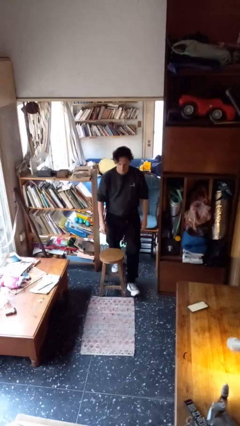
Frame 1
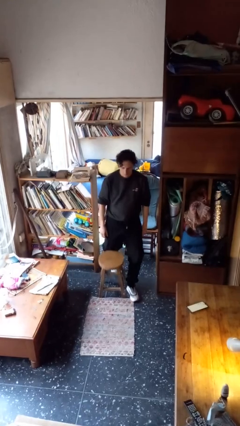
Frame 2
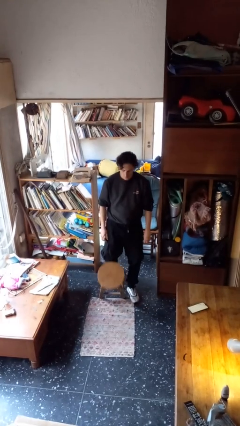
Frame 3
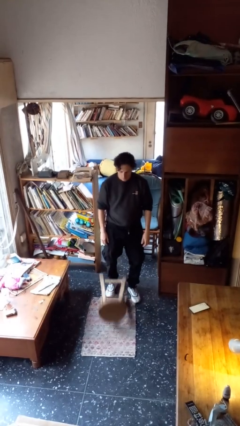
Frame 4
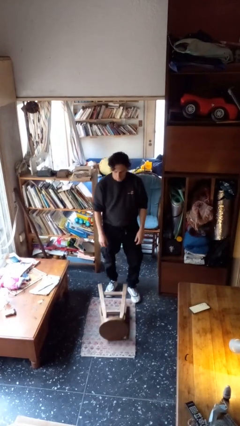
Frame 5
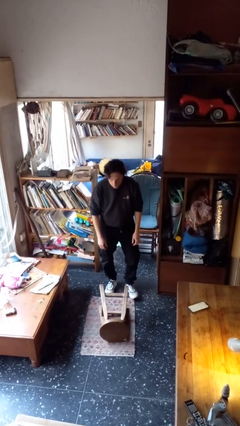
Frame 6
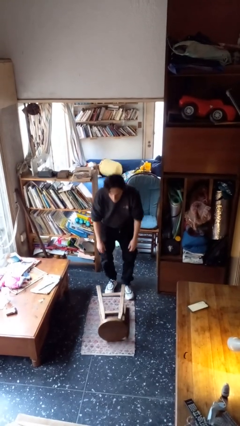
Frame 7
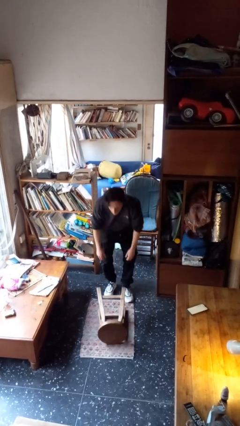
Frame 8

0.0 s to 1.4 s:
person knocks over furniture

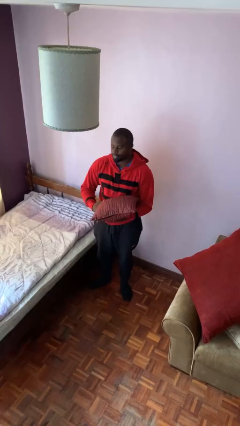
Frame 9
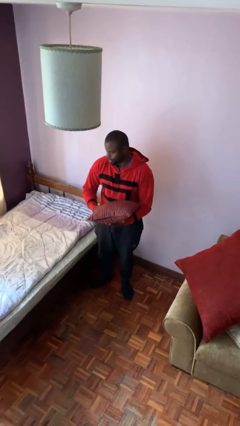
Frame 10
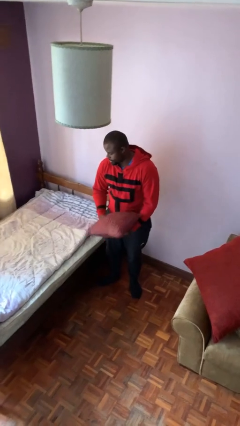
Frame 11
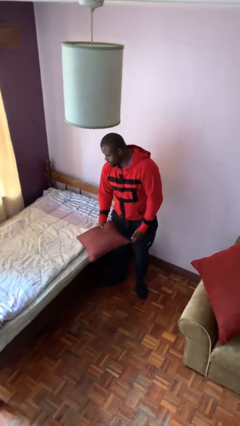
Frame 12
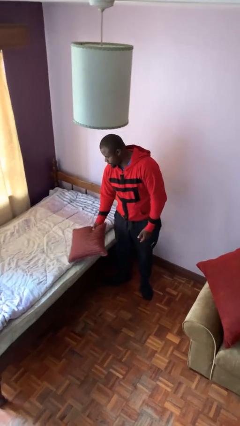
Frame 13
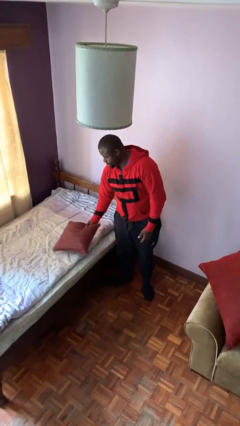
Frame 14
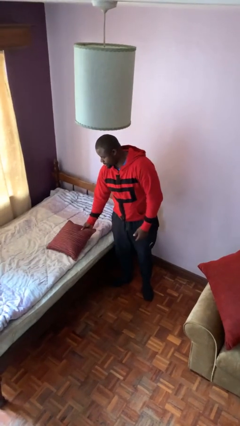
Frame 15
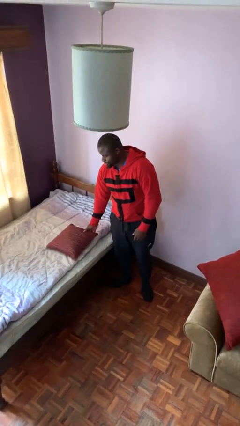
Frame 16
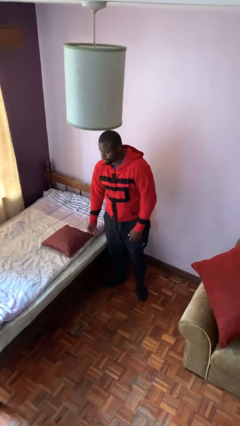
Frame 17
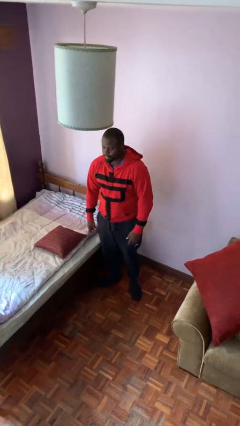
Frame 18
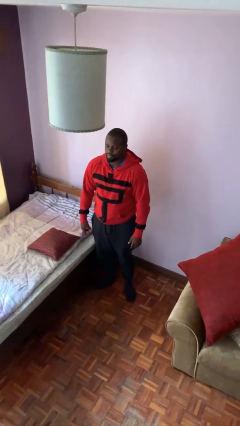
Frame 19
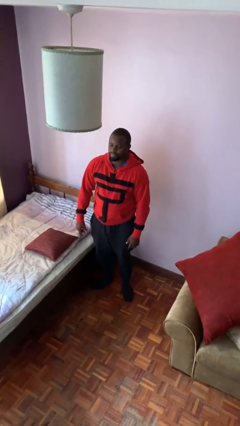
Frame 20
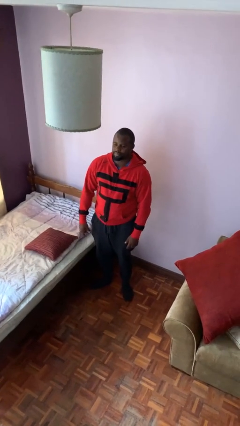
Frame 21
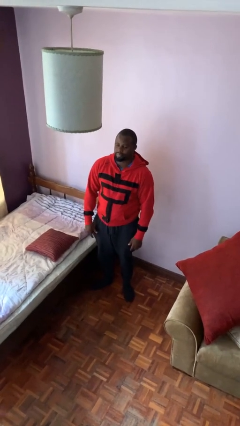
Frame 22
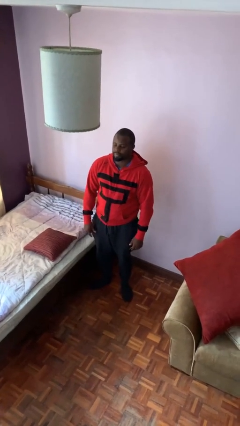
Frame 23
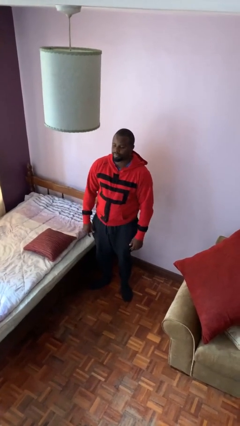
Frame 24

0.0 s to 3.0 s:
person puts down object on bed

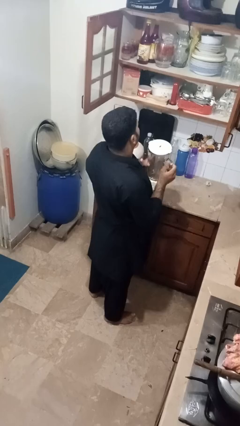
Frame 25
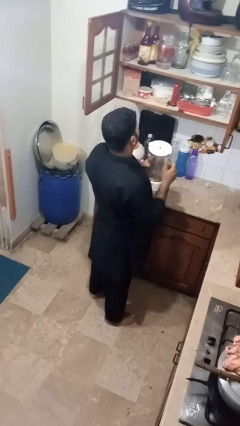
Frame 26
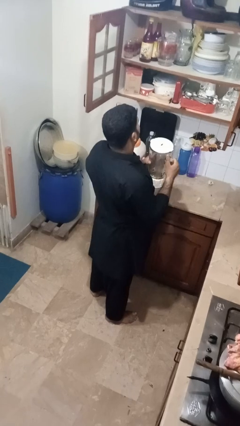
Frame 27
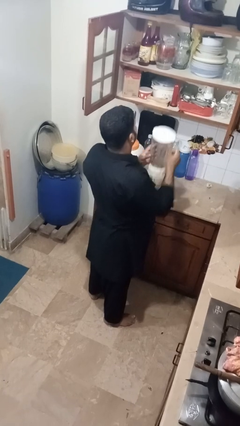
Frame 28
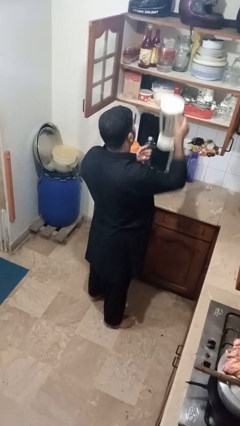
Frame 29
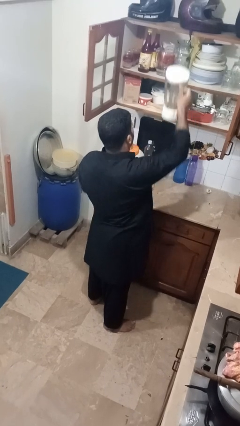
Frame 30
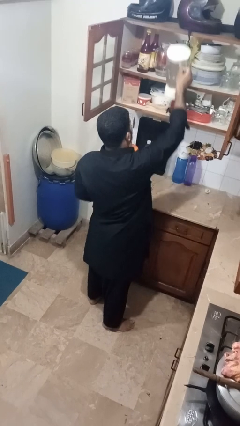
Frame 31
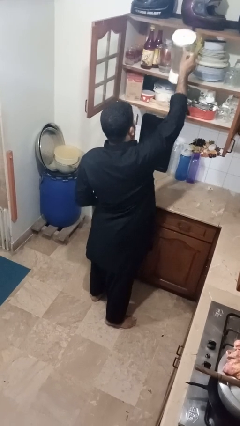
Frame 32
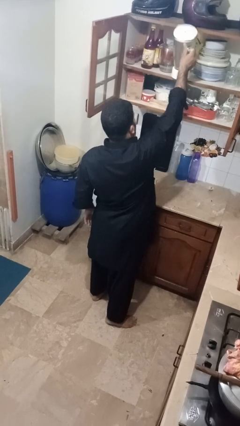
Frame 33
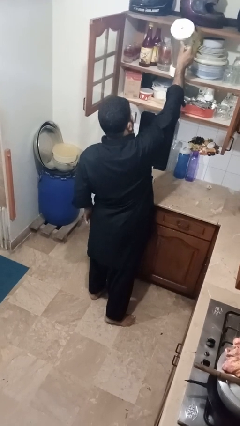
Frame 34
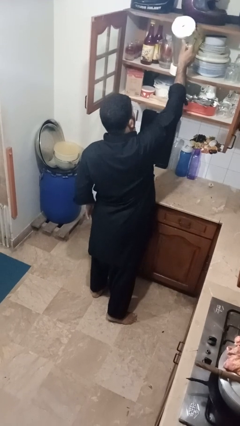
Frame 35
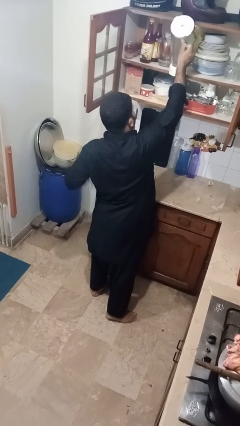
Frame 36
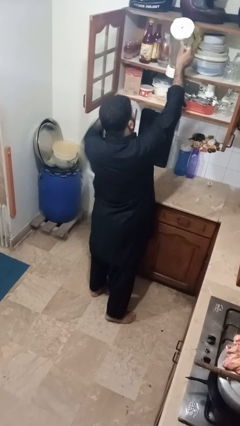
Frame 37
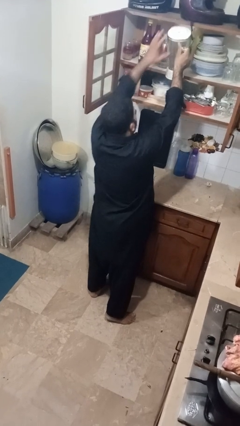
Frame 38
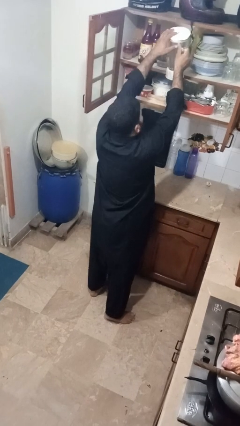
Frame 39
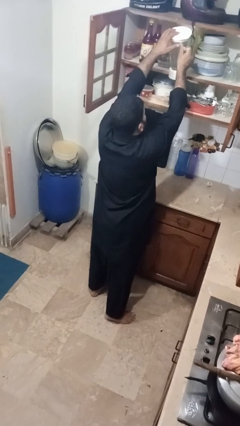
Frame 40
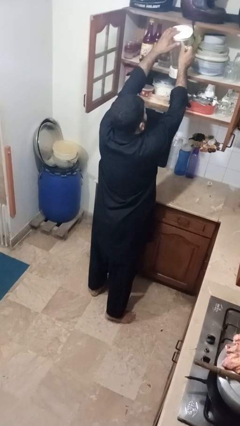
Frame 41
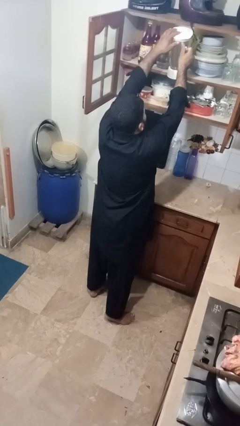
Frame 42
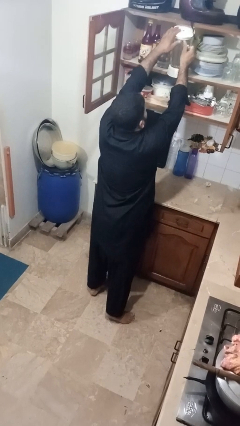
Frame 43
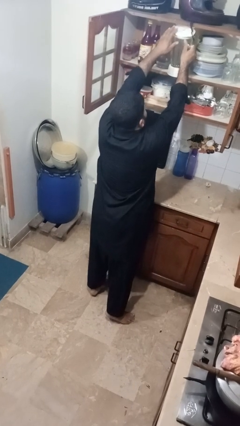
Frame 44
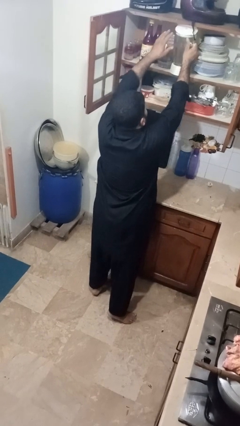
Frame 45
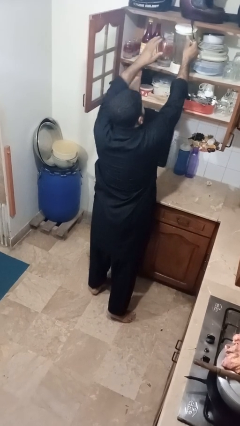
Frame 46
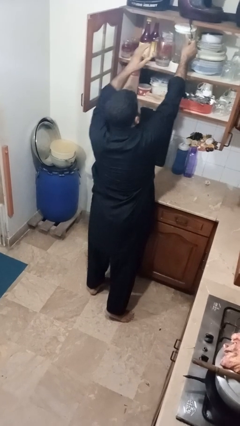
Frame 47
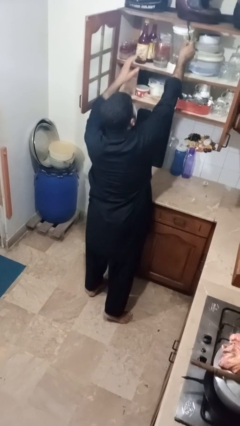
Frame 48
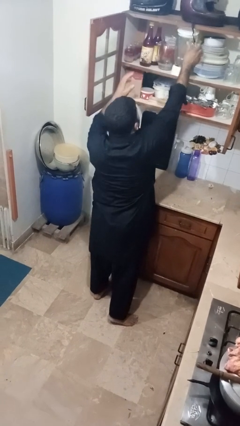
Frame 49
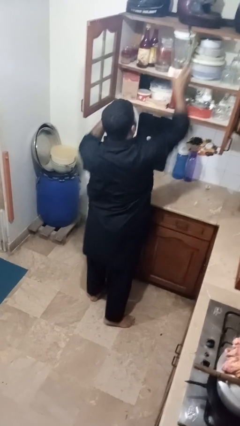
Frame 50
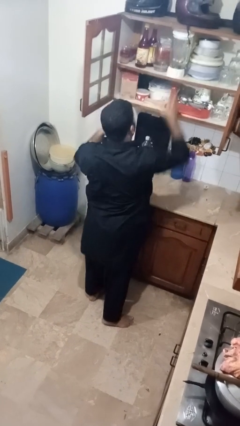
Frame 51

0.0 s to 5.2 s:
person puts down object into cabinet

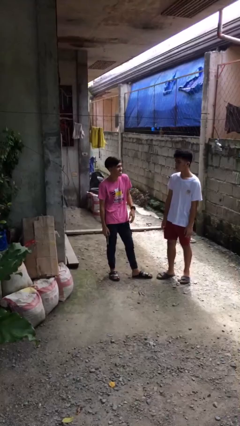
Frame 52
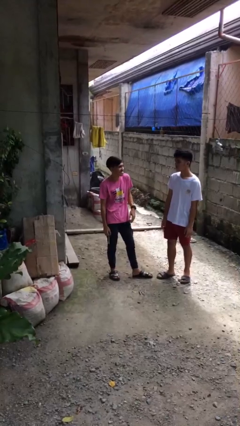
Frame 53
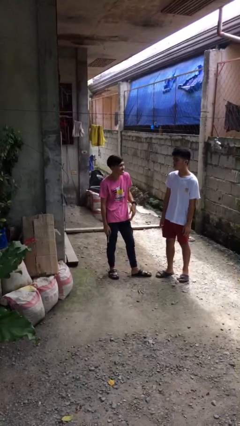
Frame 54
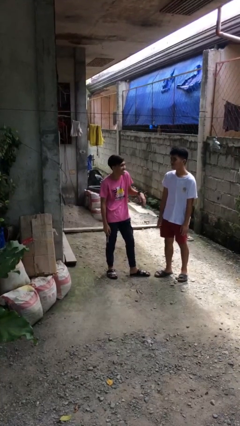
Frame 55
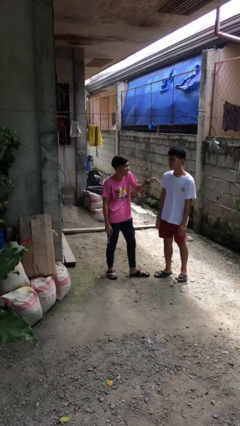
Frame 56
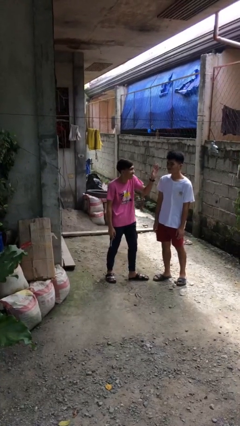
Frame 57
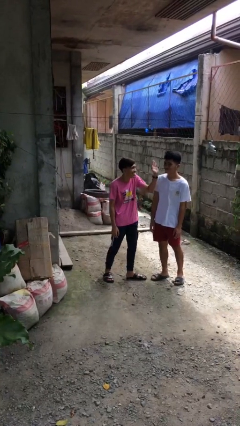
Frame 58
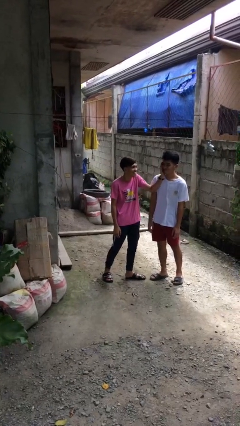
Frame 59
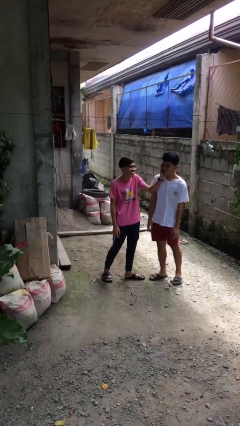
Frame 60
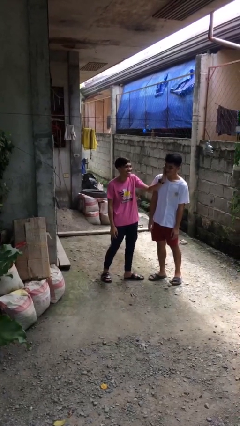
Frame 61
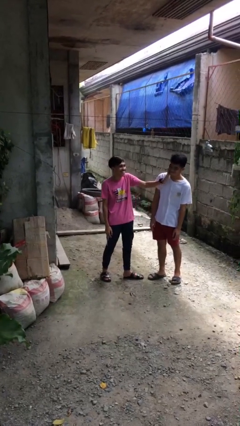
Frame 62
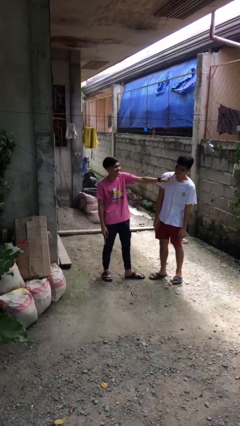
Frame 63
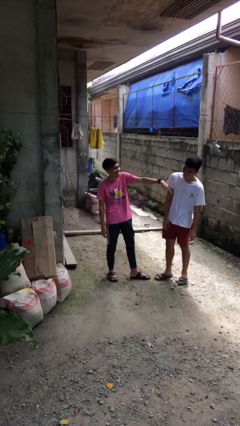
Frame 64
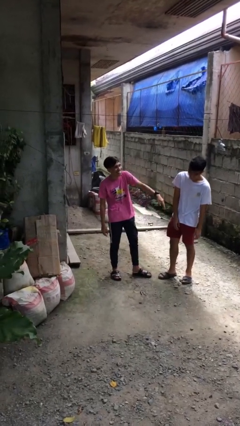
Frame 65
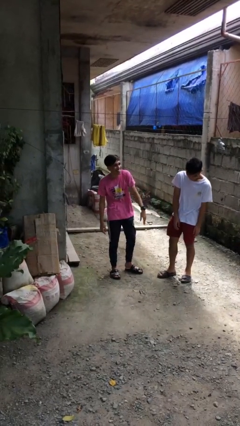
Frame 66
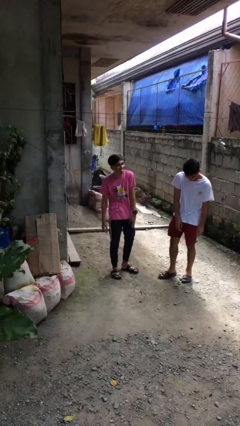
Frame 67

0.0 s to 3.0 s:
person touches face of person

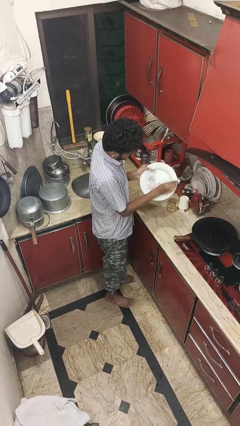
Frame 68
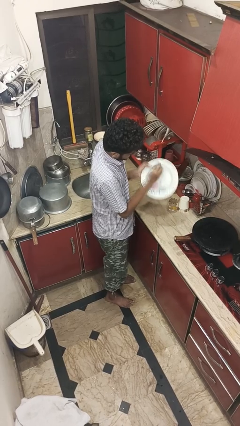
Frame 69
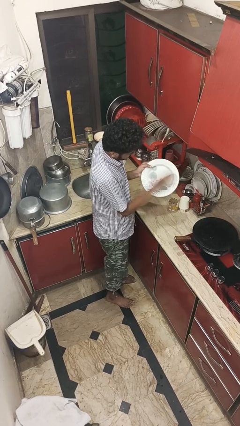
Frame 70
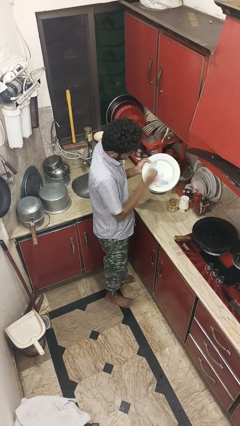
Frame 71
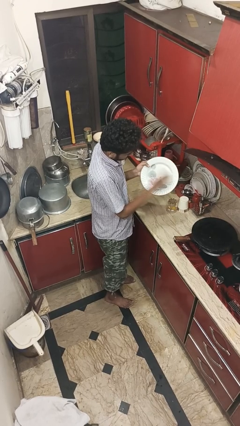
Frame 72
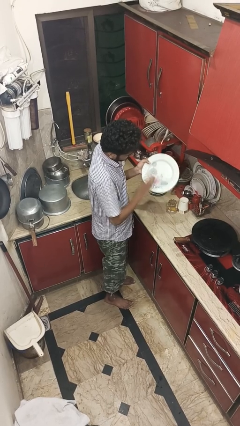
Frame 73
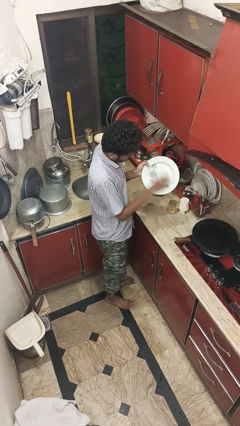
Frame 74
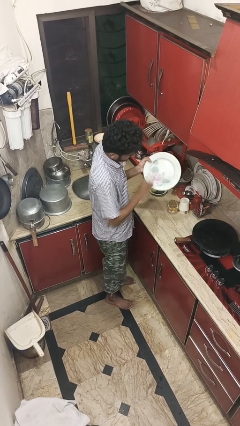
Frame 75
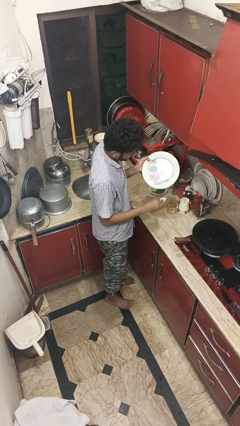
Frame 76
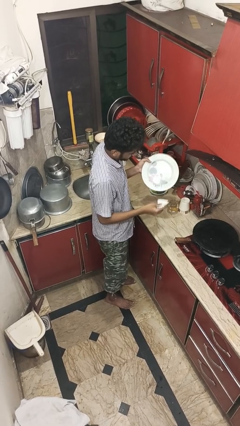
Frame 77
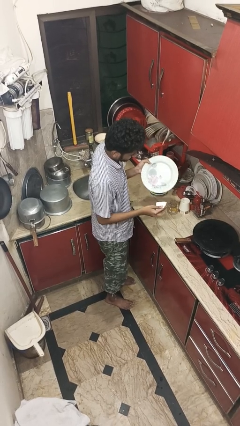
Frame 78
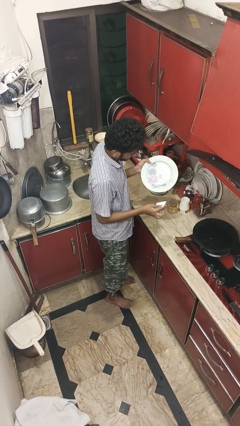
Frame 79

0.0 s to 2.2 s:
person dries dish

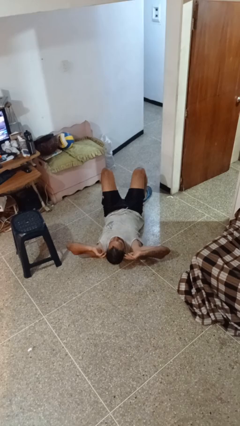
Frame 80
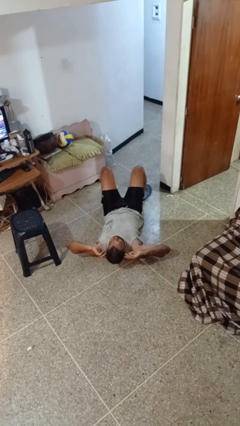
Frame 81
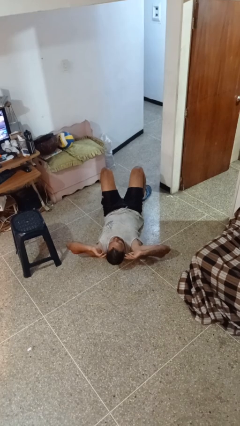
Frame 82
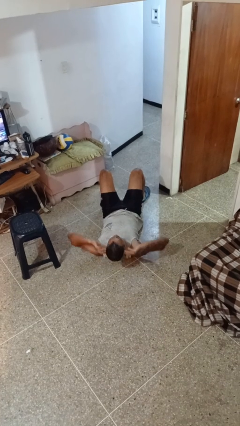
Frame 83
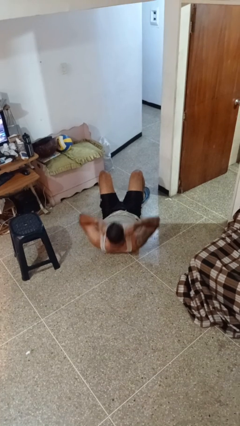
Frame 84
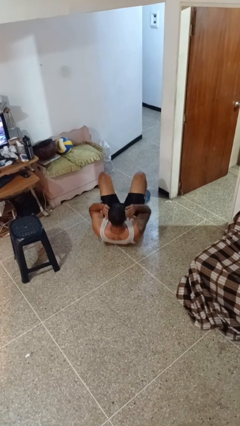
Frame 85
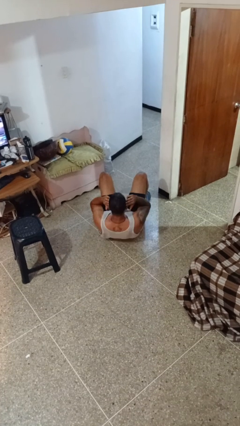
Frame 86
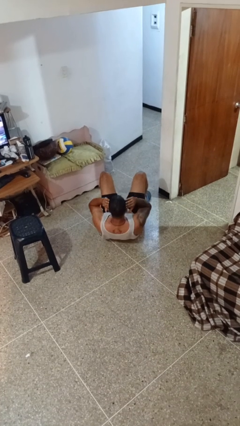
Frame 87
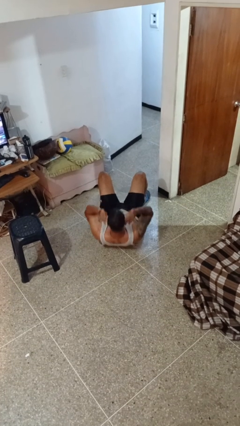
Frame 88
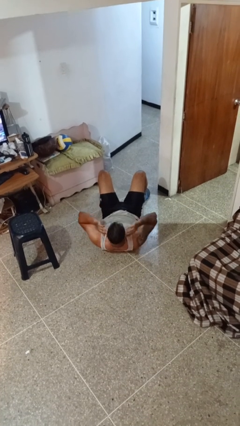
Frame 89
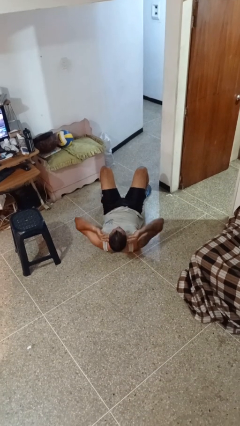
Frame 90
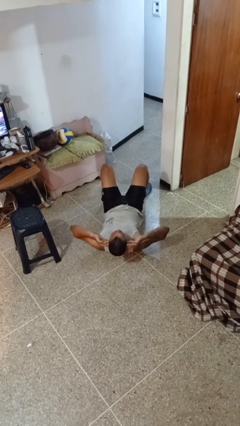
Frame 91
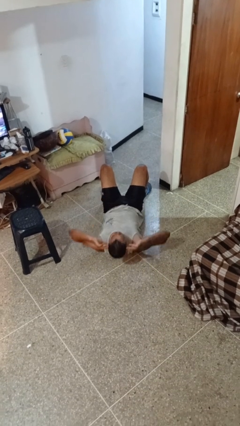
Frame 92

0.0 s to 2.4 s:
person exercises with situp
